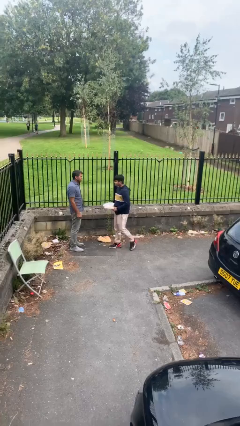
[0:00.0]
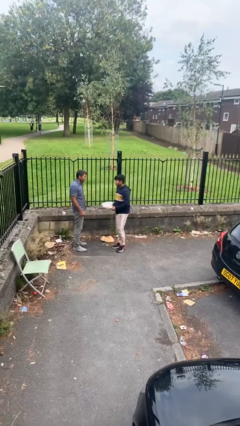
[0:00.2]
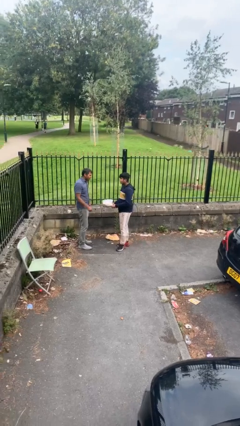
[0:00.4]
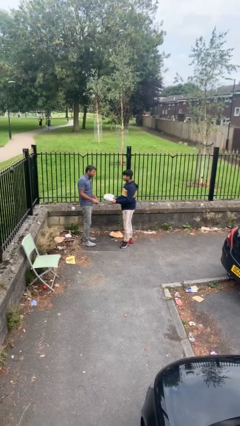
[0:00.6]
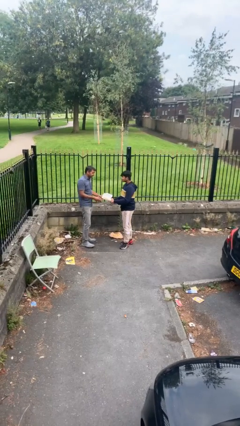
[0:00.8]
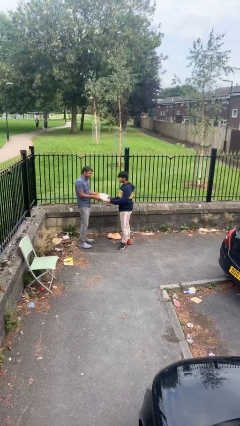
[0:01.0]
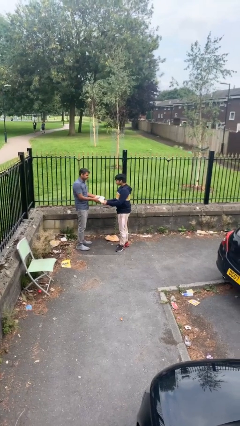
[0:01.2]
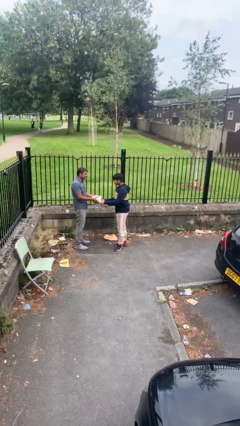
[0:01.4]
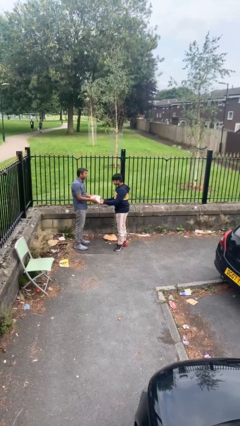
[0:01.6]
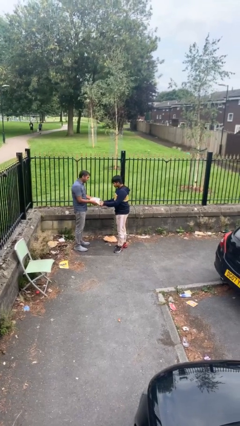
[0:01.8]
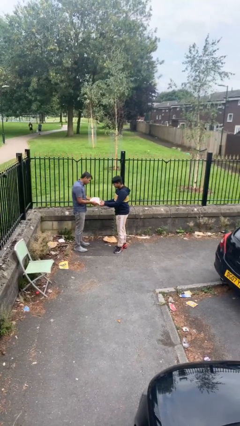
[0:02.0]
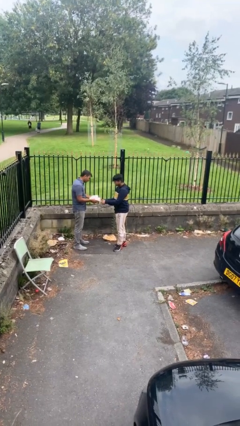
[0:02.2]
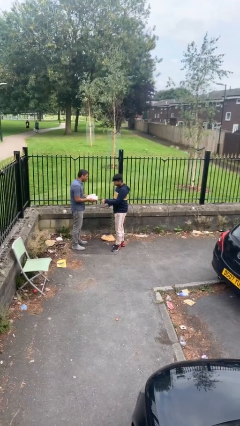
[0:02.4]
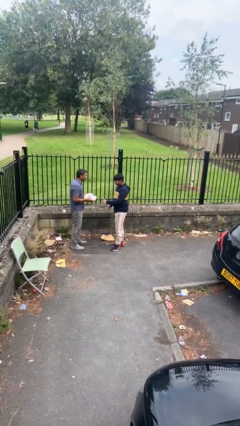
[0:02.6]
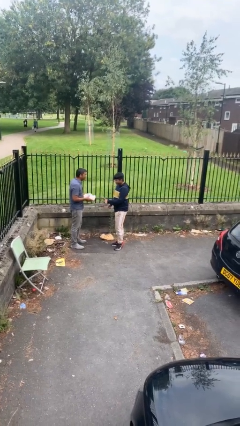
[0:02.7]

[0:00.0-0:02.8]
person transfers object to person

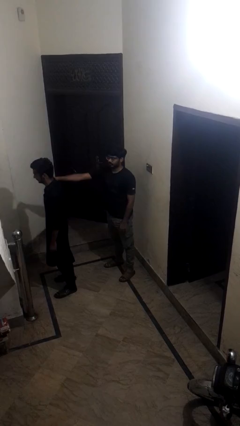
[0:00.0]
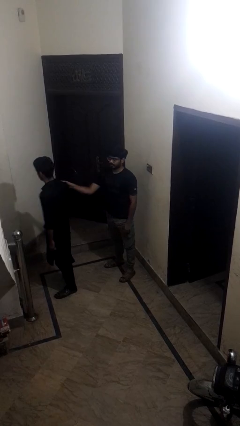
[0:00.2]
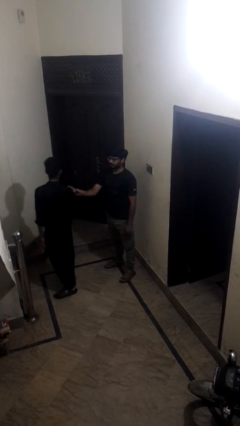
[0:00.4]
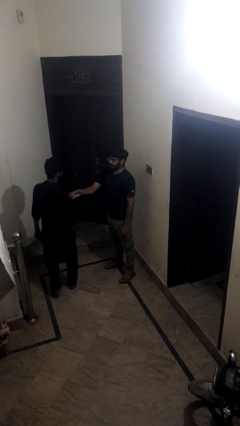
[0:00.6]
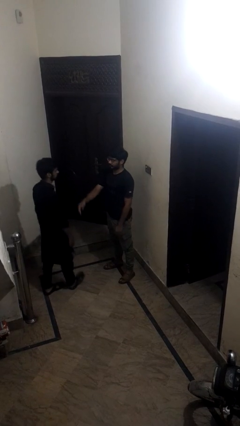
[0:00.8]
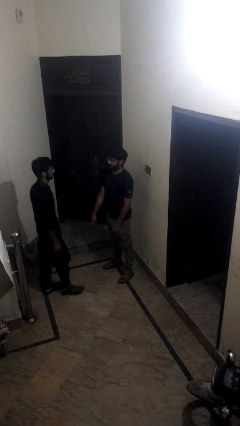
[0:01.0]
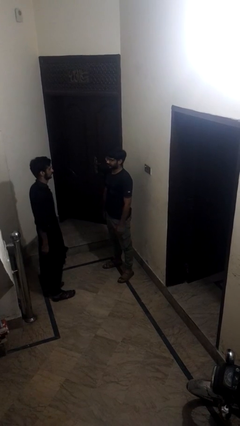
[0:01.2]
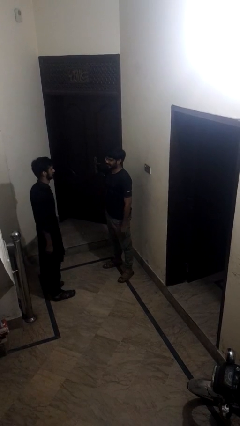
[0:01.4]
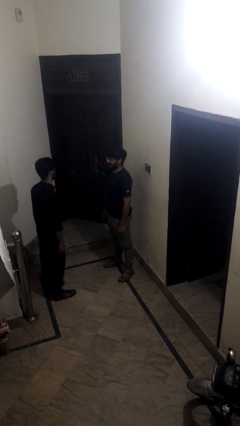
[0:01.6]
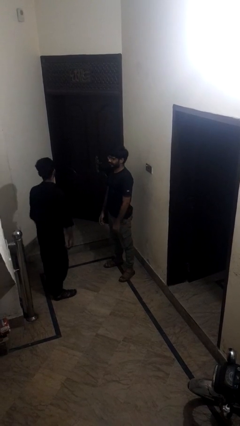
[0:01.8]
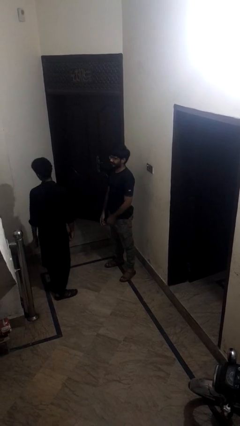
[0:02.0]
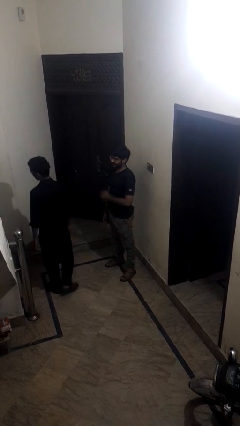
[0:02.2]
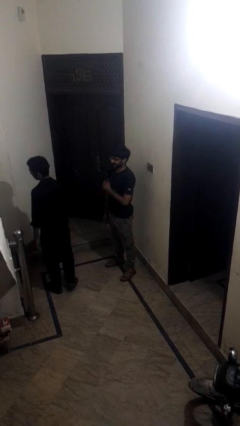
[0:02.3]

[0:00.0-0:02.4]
person spins person around

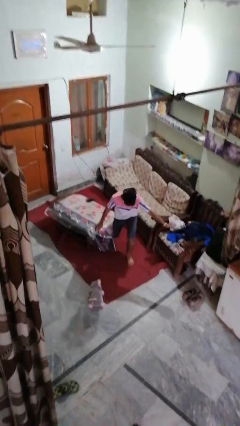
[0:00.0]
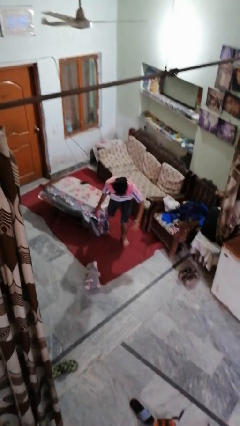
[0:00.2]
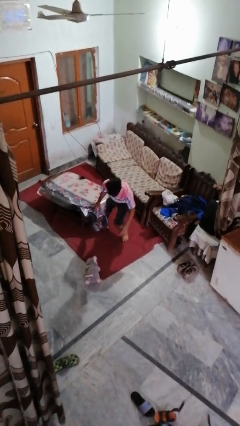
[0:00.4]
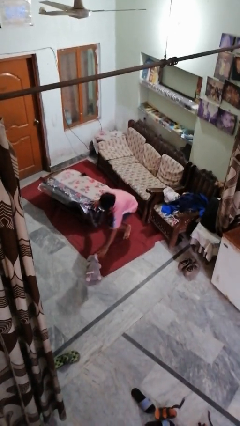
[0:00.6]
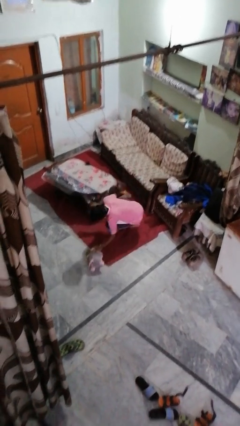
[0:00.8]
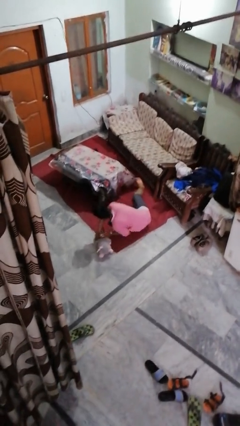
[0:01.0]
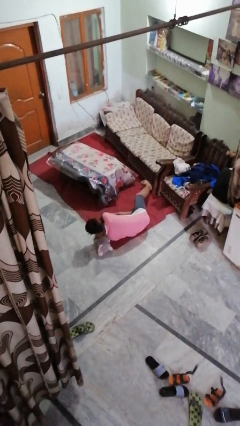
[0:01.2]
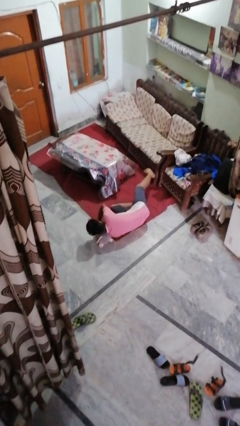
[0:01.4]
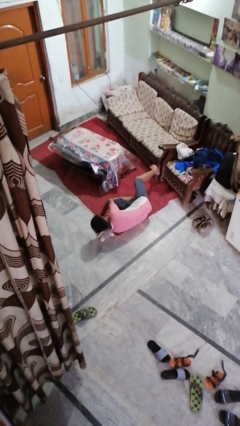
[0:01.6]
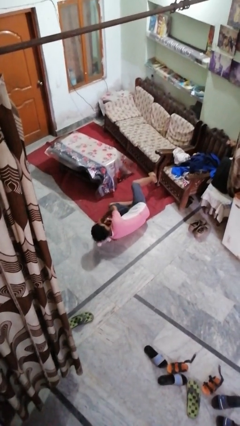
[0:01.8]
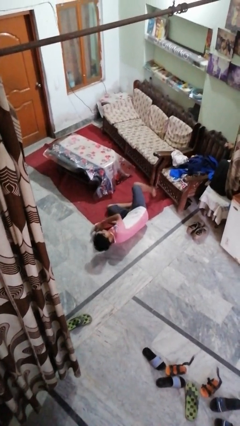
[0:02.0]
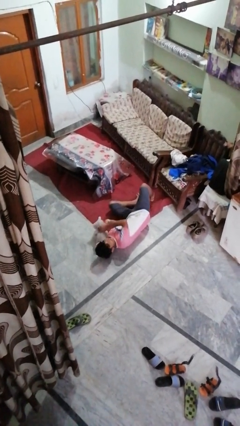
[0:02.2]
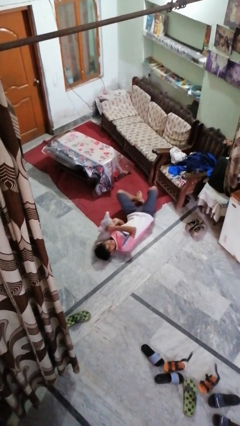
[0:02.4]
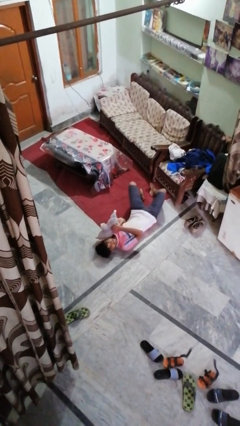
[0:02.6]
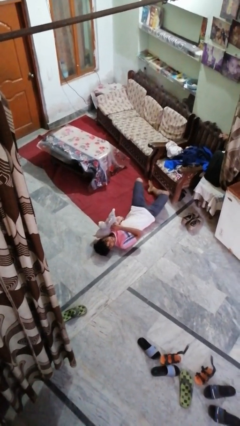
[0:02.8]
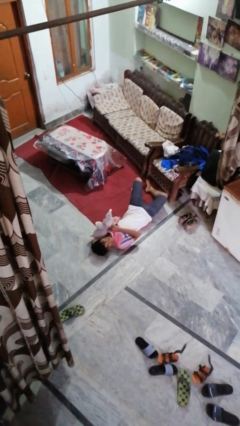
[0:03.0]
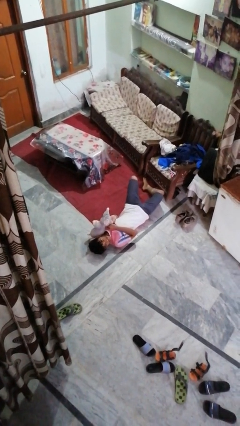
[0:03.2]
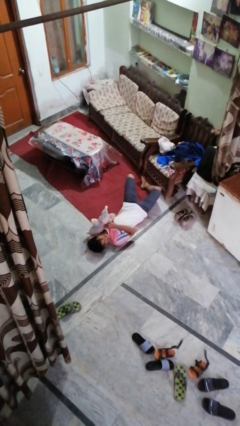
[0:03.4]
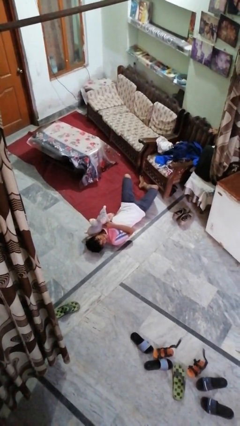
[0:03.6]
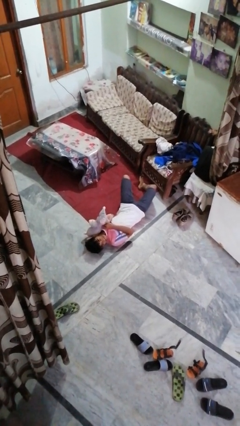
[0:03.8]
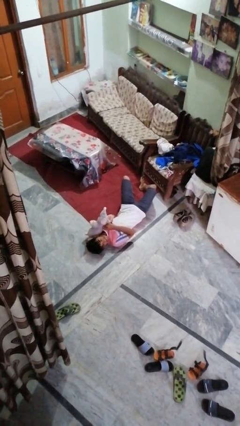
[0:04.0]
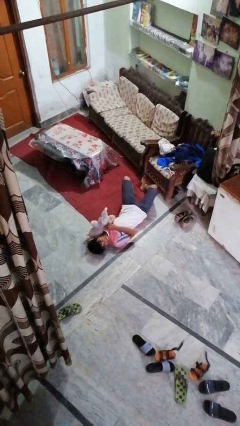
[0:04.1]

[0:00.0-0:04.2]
person lies down on floor

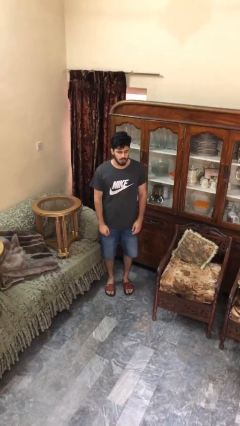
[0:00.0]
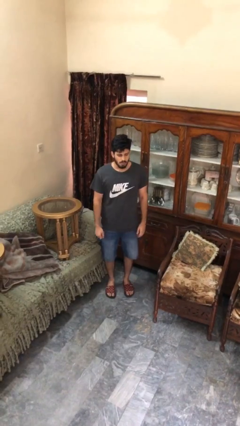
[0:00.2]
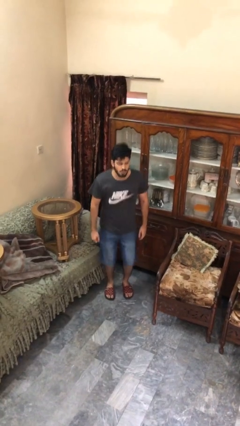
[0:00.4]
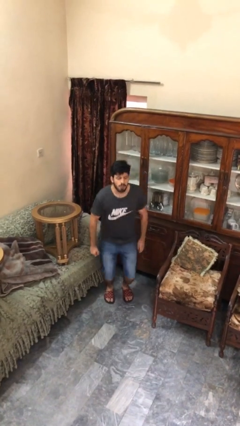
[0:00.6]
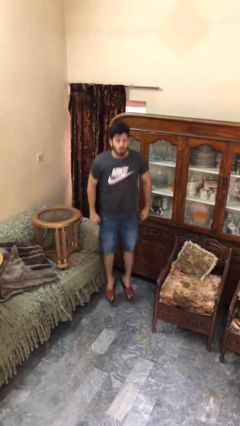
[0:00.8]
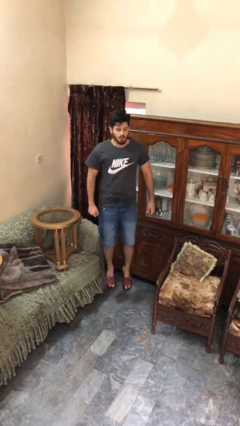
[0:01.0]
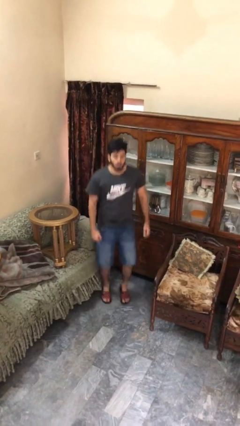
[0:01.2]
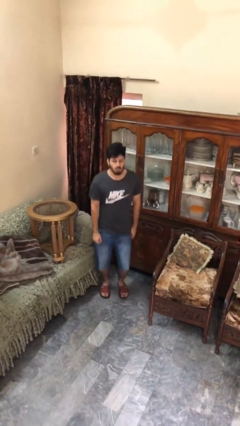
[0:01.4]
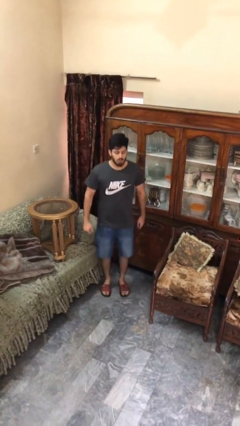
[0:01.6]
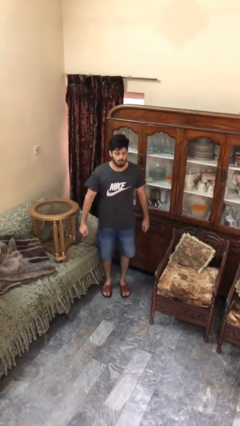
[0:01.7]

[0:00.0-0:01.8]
person jumps

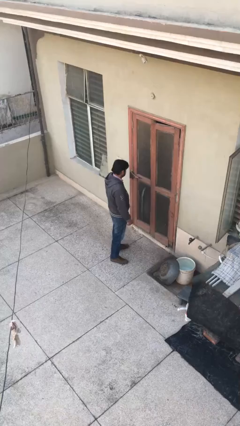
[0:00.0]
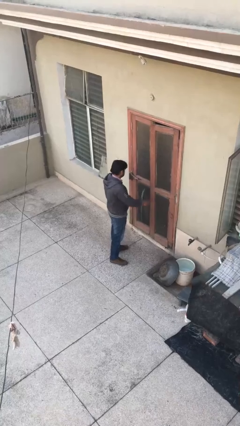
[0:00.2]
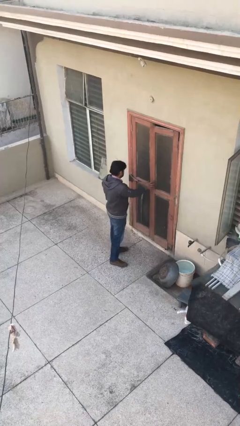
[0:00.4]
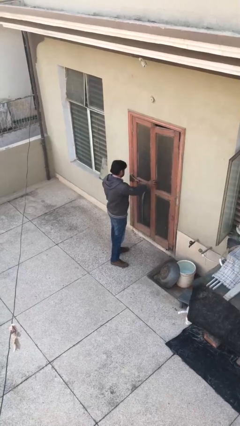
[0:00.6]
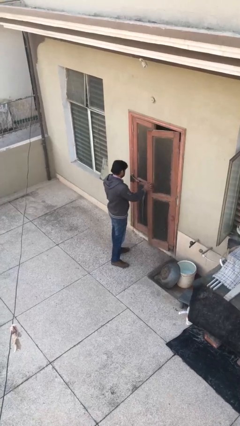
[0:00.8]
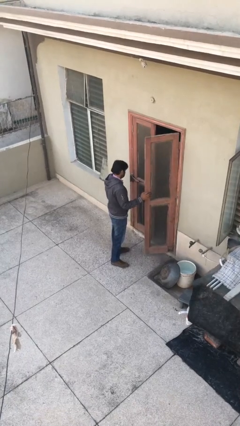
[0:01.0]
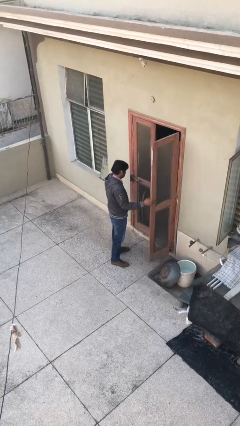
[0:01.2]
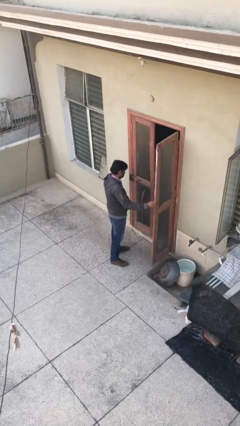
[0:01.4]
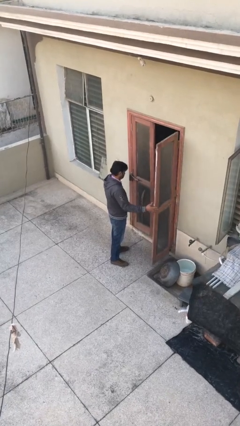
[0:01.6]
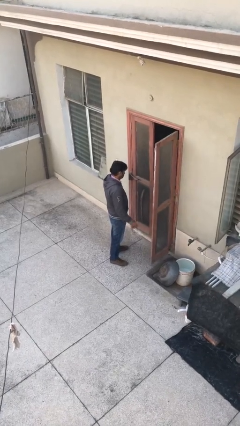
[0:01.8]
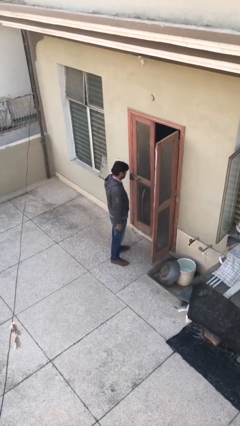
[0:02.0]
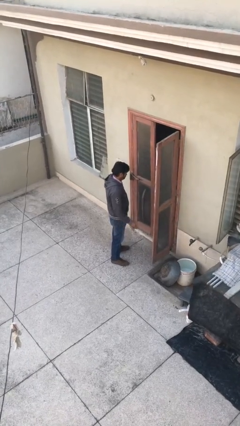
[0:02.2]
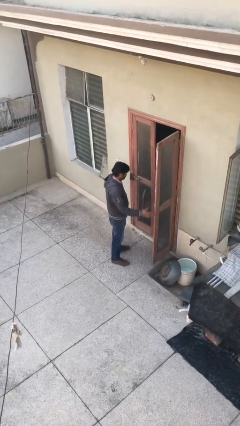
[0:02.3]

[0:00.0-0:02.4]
person opens facility door

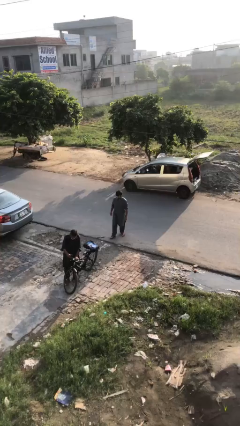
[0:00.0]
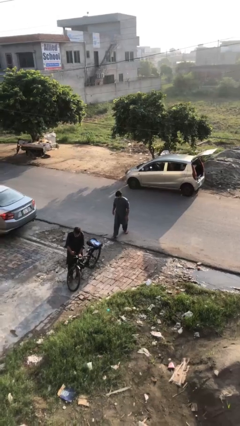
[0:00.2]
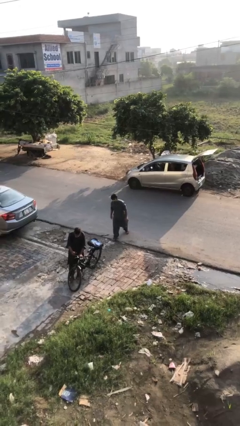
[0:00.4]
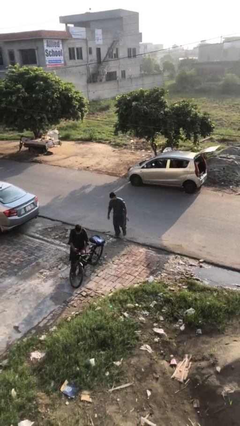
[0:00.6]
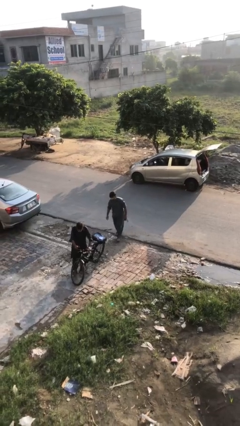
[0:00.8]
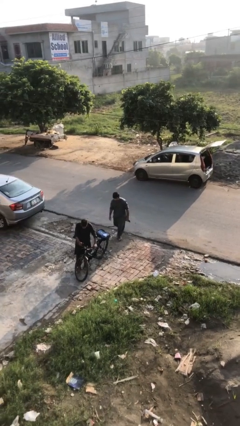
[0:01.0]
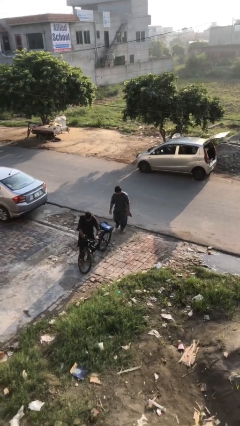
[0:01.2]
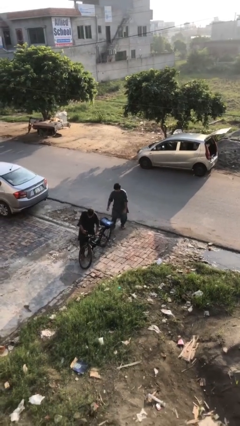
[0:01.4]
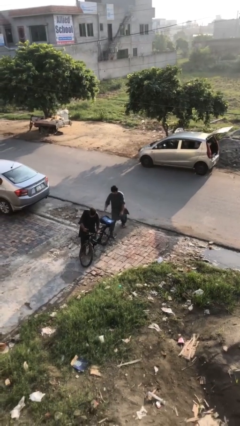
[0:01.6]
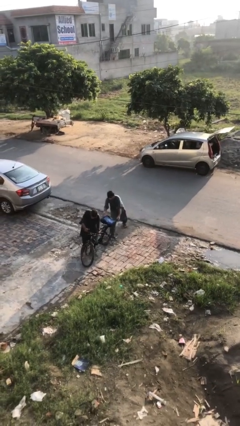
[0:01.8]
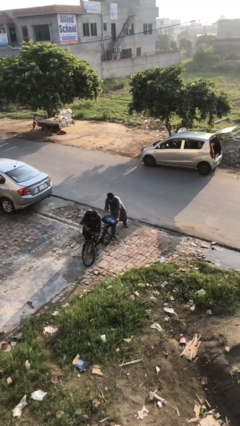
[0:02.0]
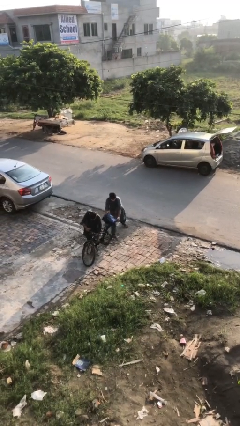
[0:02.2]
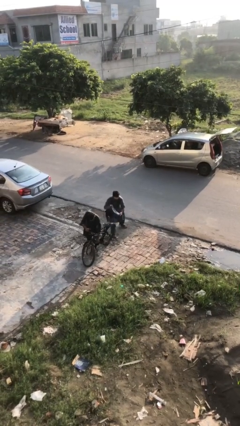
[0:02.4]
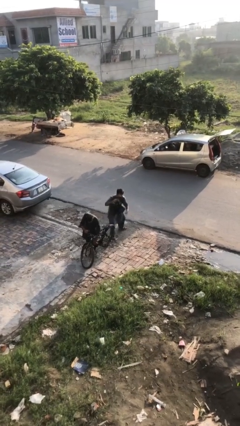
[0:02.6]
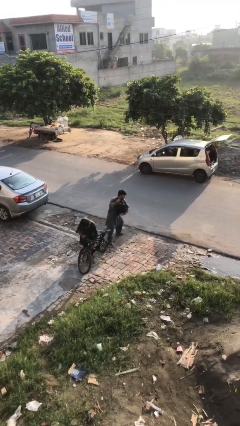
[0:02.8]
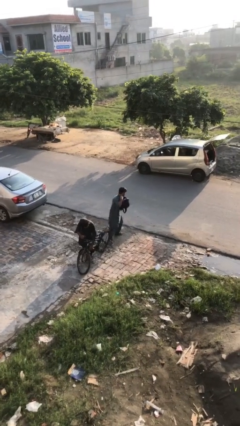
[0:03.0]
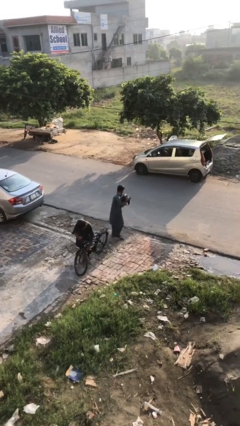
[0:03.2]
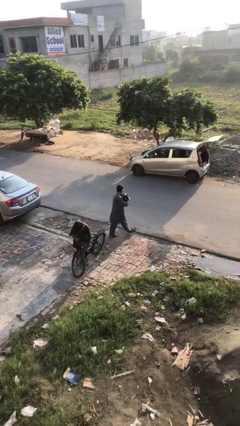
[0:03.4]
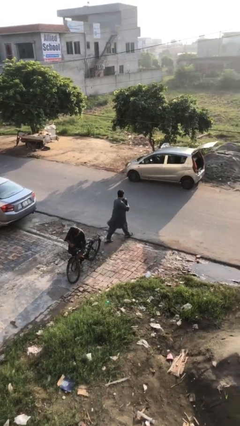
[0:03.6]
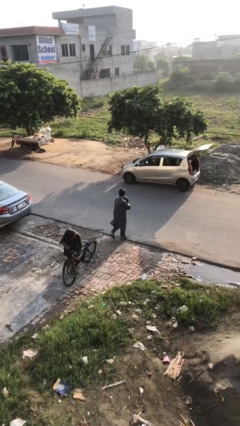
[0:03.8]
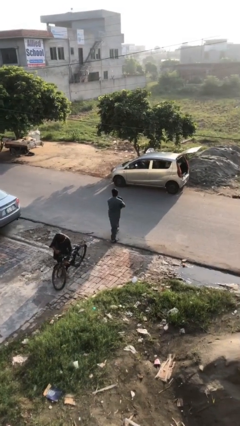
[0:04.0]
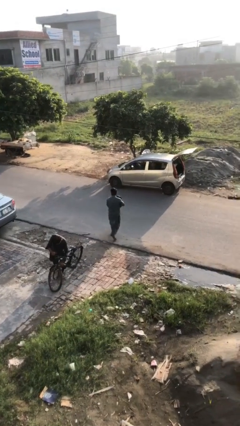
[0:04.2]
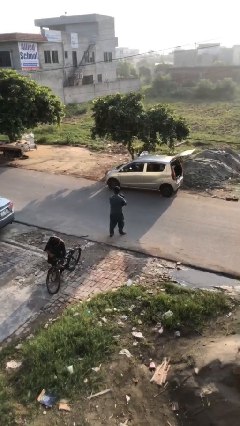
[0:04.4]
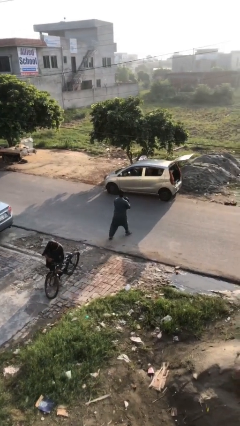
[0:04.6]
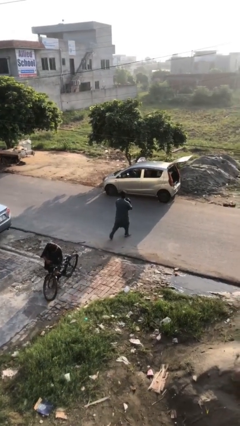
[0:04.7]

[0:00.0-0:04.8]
person steals object from person
